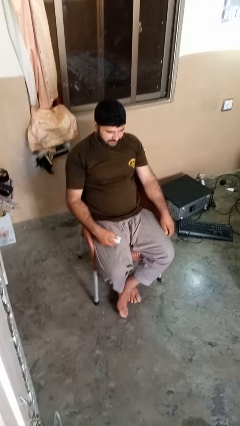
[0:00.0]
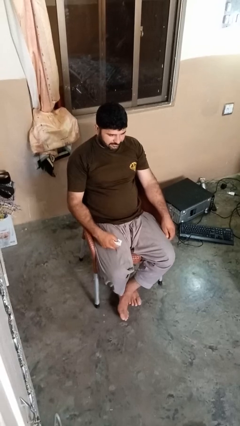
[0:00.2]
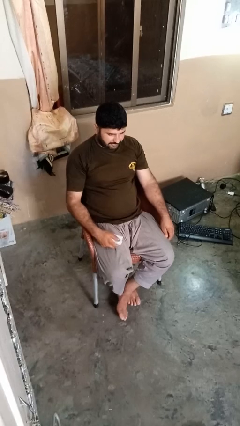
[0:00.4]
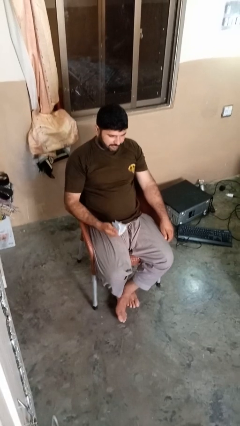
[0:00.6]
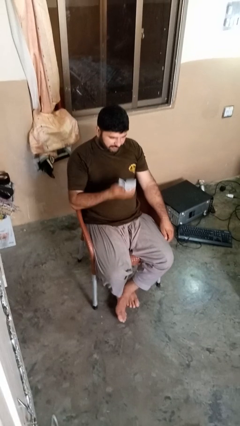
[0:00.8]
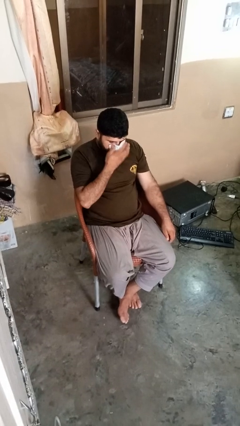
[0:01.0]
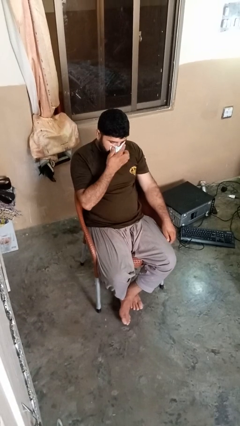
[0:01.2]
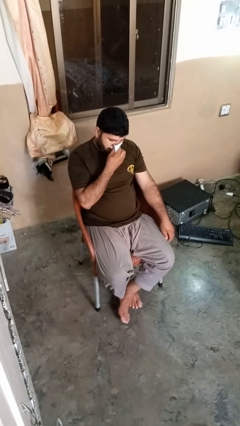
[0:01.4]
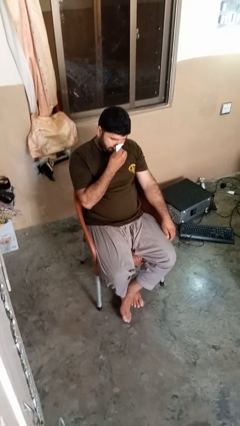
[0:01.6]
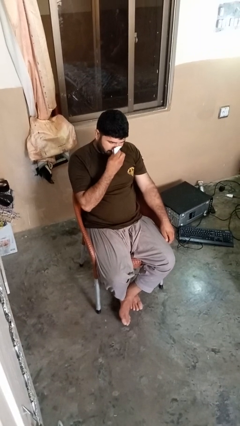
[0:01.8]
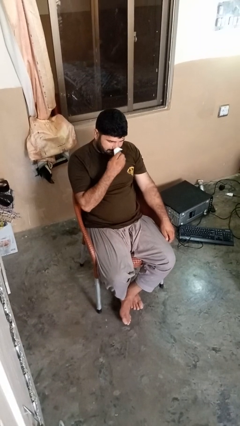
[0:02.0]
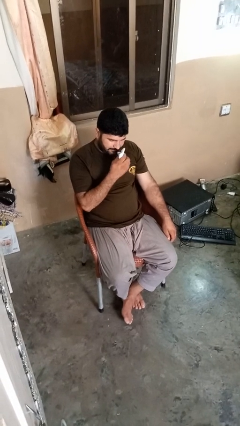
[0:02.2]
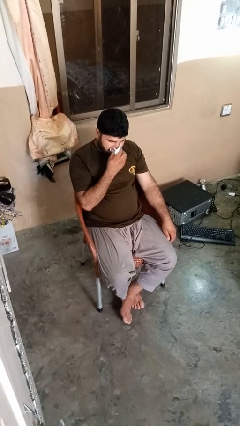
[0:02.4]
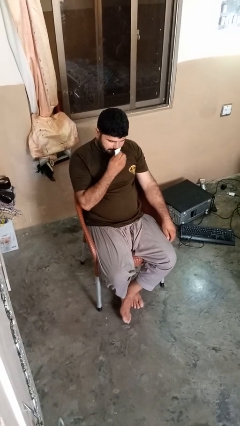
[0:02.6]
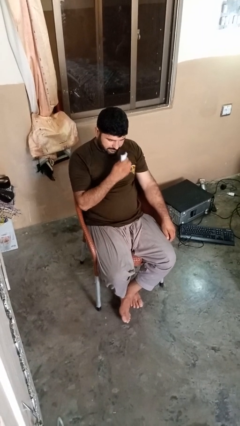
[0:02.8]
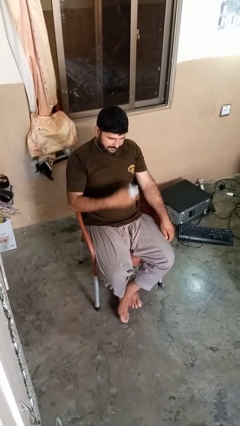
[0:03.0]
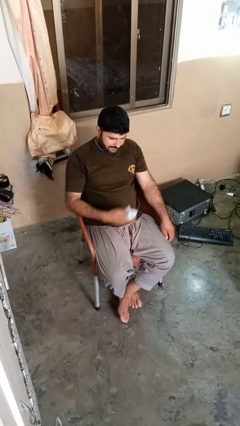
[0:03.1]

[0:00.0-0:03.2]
person blows nose

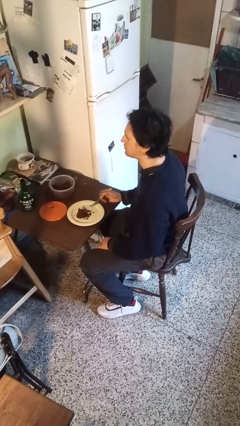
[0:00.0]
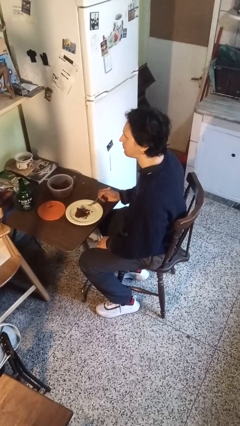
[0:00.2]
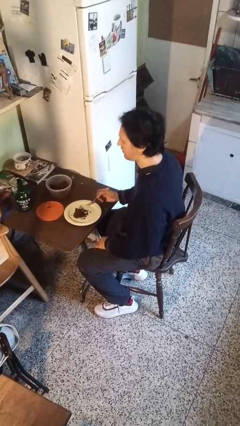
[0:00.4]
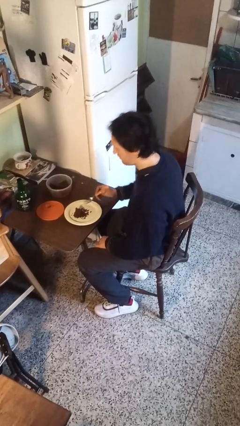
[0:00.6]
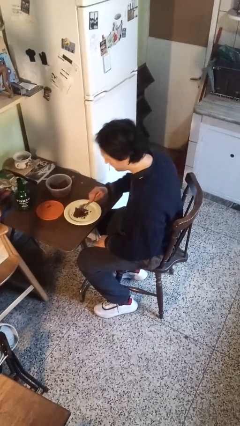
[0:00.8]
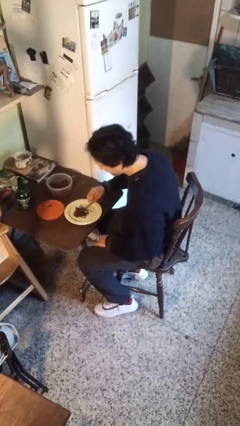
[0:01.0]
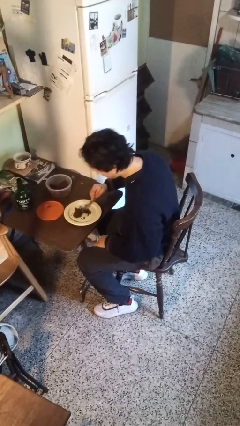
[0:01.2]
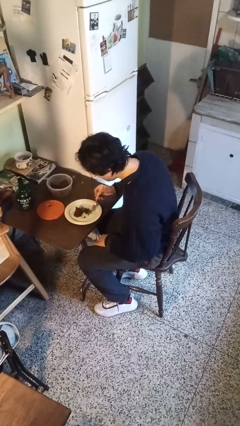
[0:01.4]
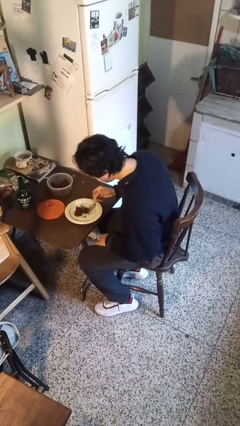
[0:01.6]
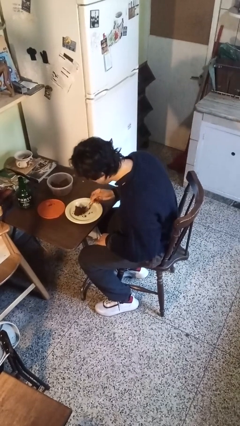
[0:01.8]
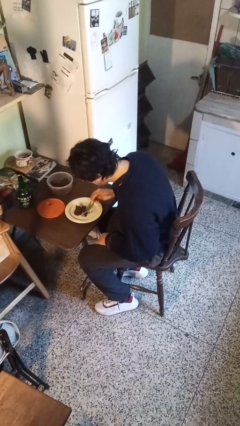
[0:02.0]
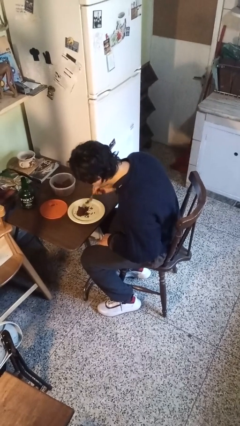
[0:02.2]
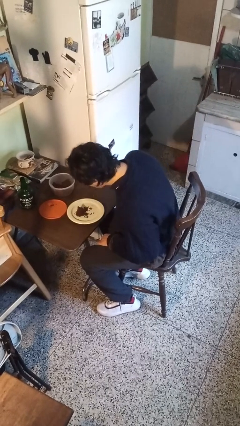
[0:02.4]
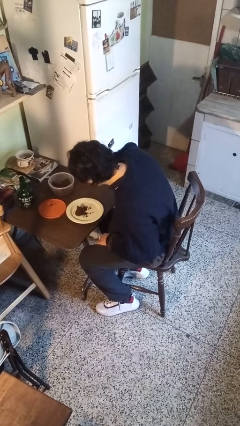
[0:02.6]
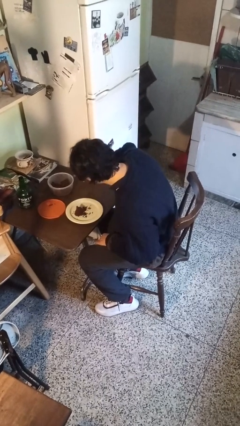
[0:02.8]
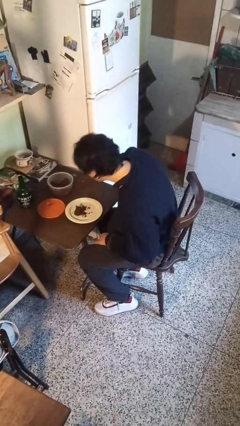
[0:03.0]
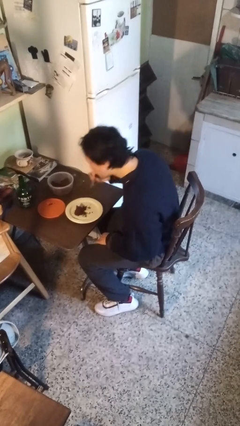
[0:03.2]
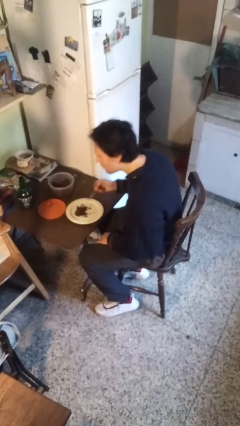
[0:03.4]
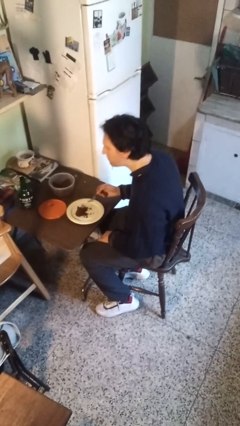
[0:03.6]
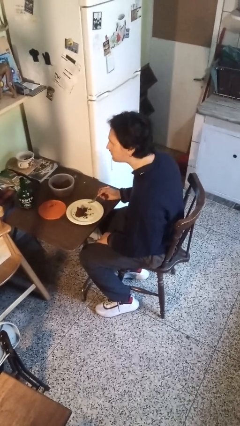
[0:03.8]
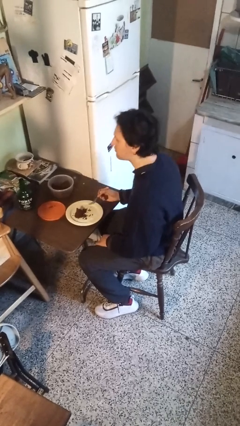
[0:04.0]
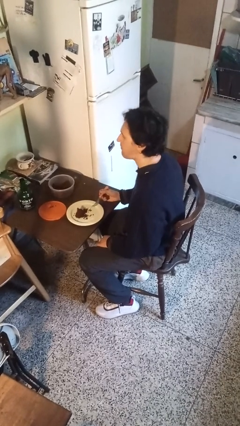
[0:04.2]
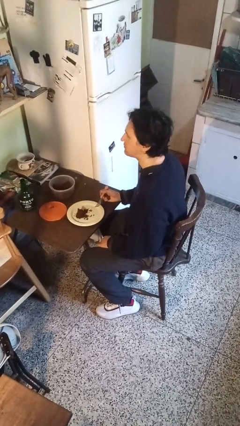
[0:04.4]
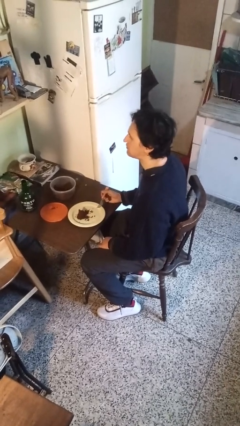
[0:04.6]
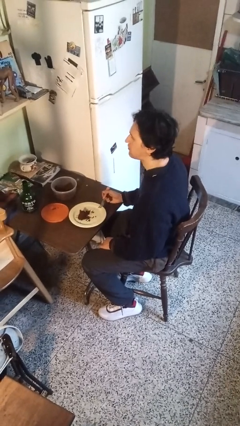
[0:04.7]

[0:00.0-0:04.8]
person eats with utensil

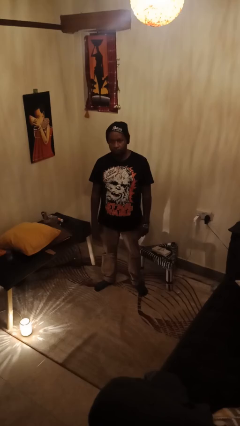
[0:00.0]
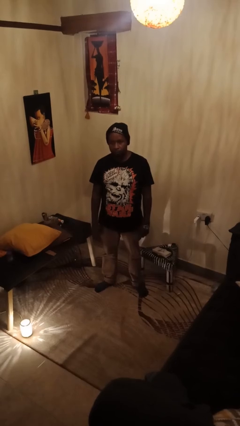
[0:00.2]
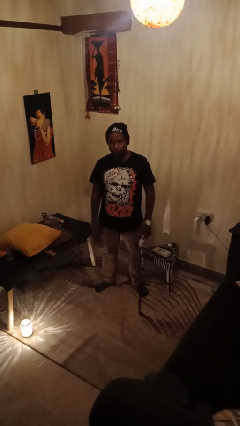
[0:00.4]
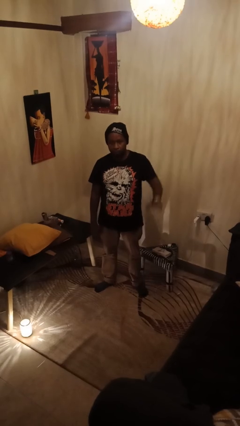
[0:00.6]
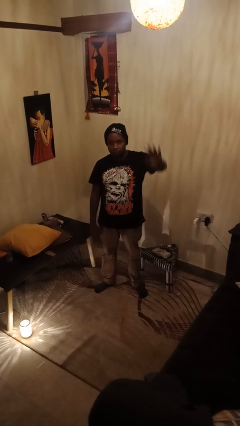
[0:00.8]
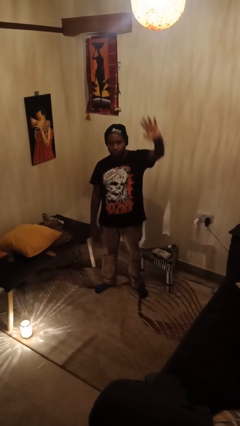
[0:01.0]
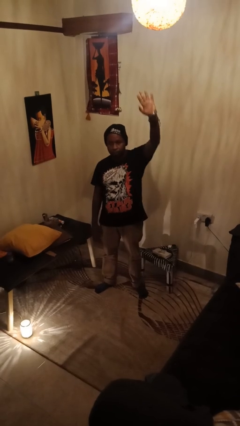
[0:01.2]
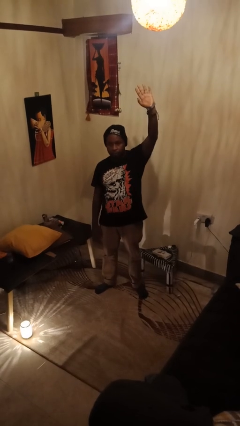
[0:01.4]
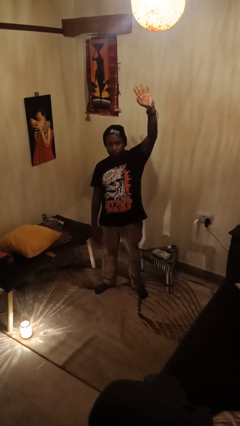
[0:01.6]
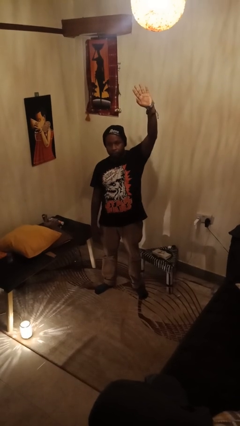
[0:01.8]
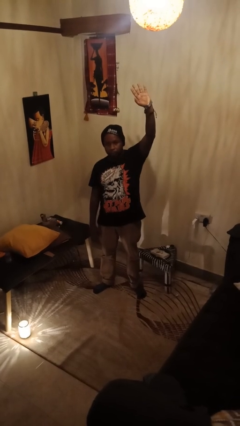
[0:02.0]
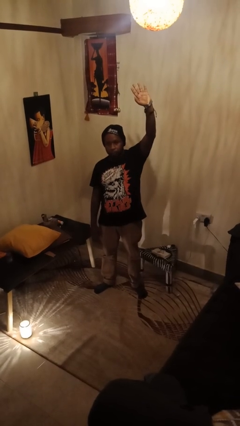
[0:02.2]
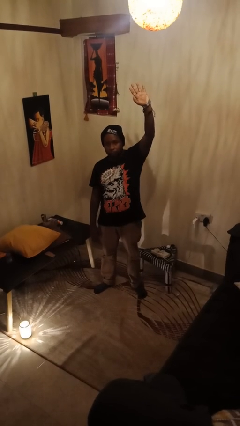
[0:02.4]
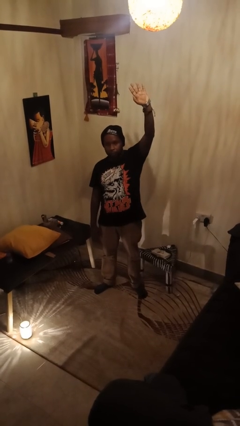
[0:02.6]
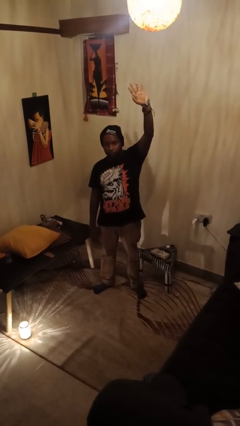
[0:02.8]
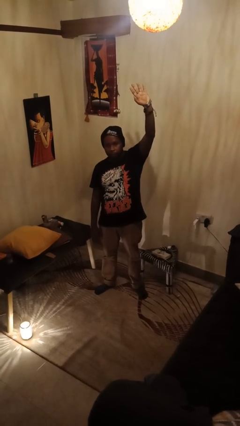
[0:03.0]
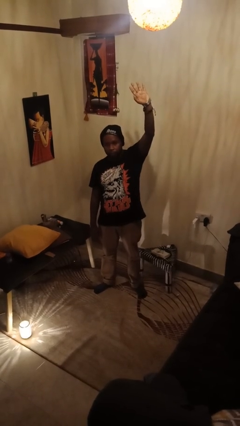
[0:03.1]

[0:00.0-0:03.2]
person gestures raise hand

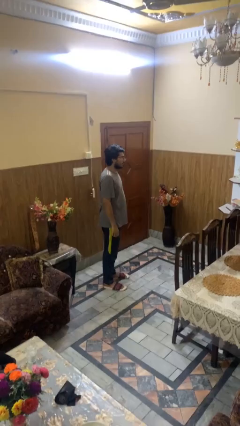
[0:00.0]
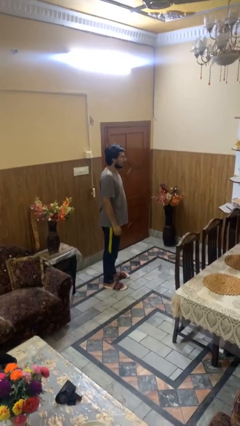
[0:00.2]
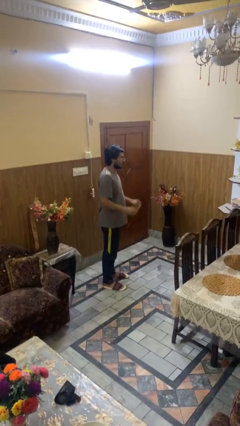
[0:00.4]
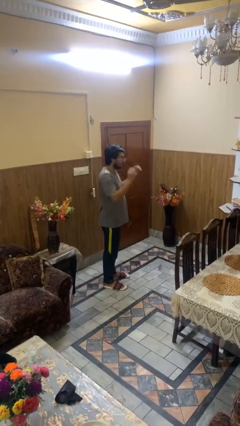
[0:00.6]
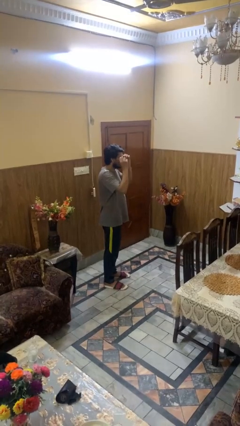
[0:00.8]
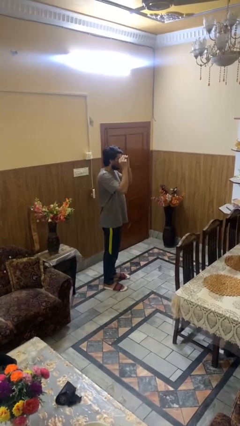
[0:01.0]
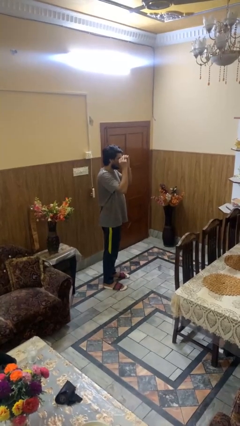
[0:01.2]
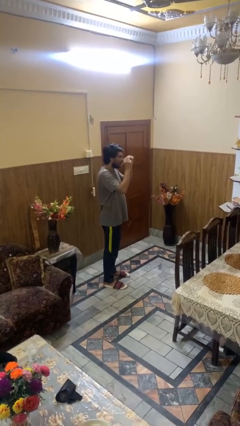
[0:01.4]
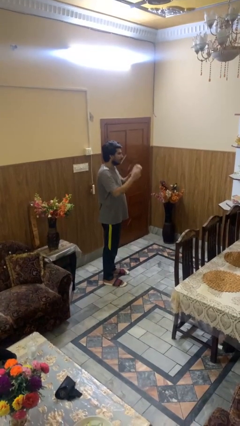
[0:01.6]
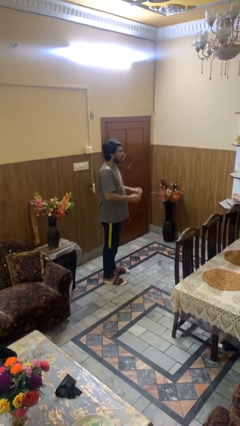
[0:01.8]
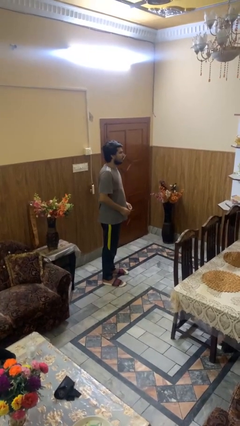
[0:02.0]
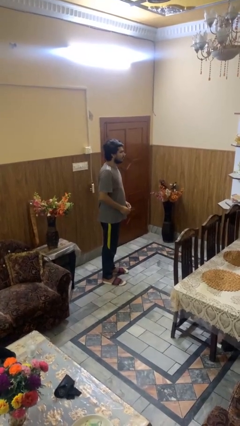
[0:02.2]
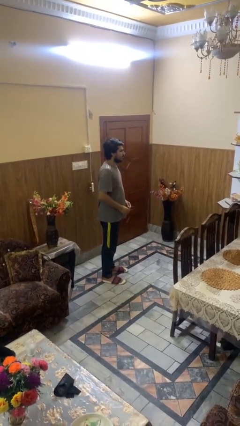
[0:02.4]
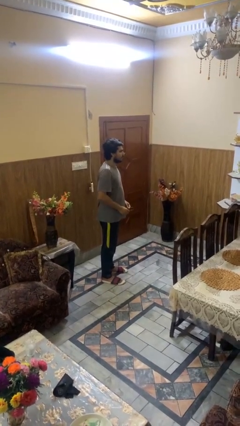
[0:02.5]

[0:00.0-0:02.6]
person takes off glasses

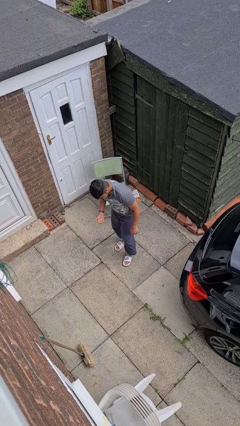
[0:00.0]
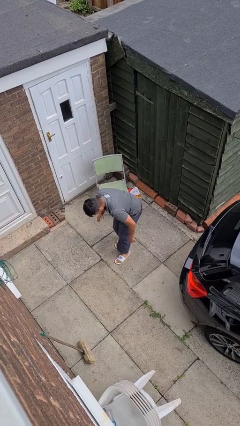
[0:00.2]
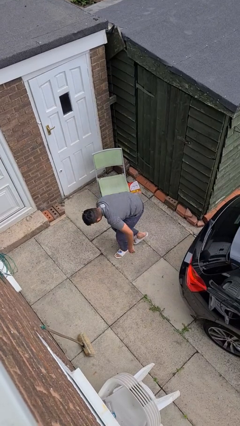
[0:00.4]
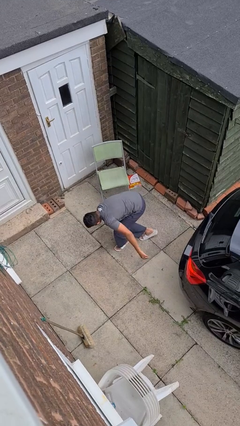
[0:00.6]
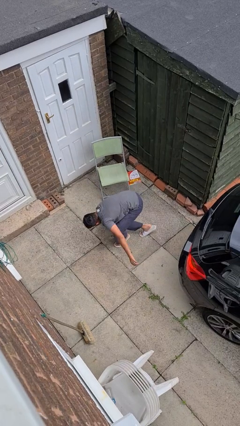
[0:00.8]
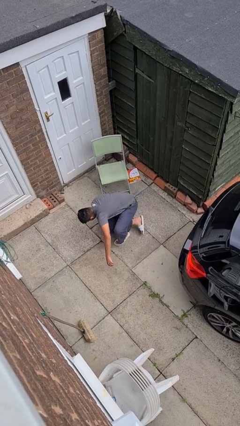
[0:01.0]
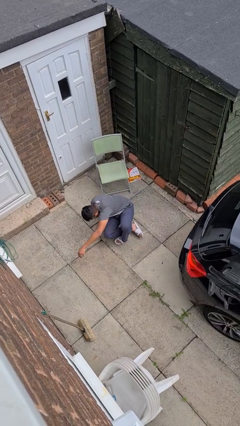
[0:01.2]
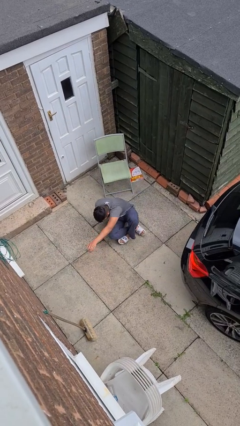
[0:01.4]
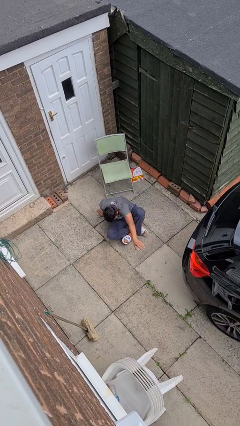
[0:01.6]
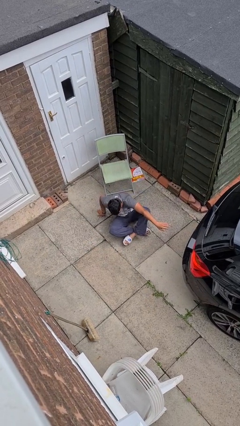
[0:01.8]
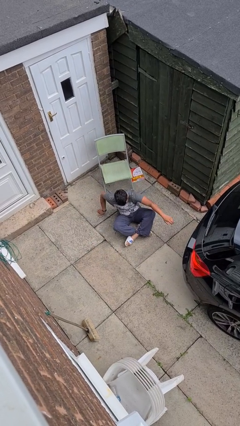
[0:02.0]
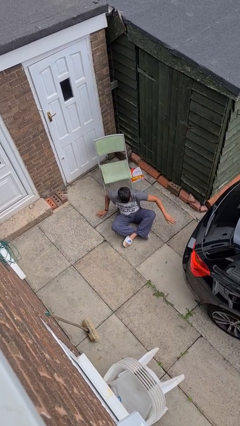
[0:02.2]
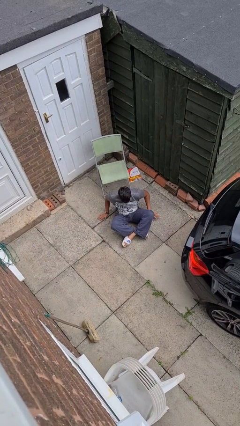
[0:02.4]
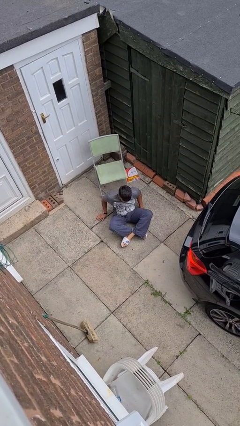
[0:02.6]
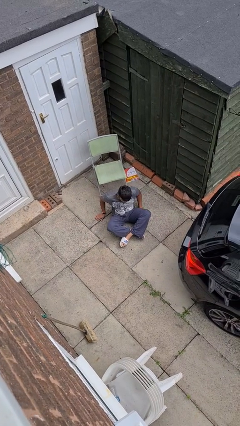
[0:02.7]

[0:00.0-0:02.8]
person sits crisscross

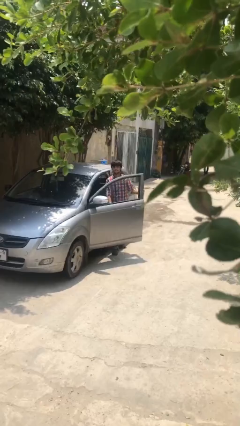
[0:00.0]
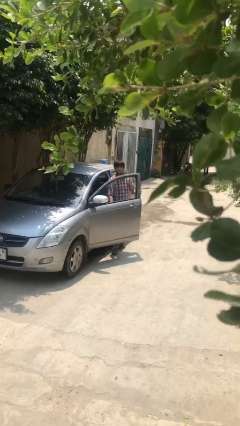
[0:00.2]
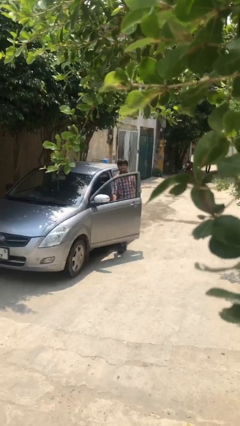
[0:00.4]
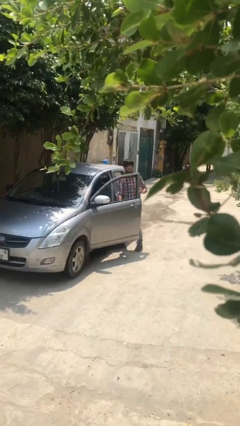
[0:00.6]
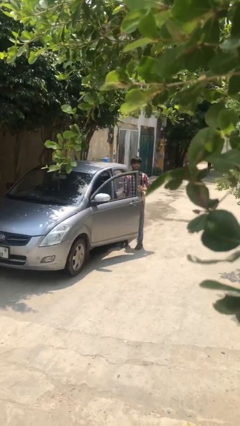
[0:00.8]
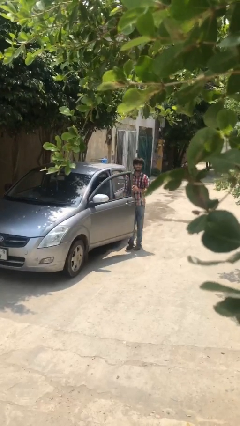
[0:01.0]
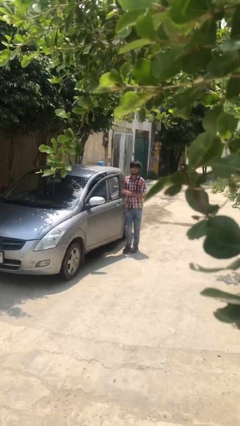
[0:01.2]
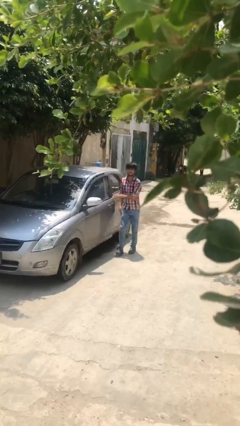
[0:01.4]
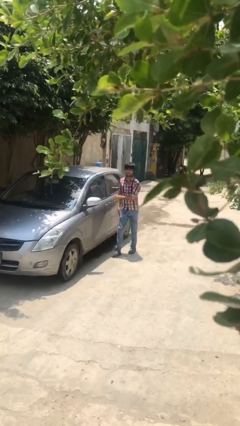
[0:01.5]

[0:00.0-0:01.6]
person closes car door
